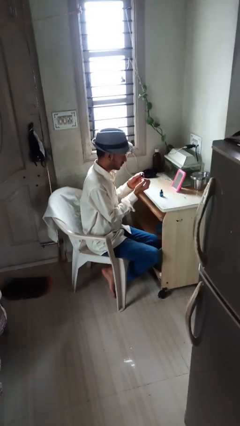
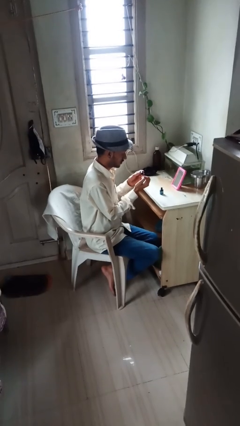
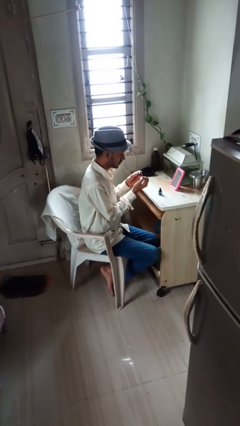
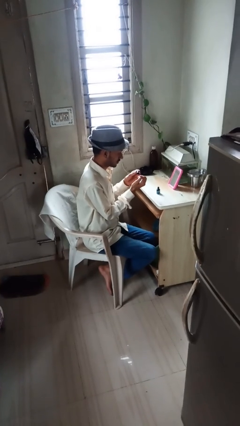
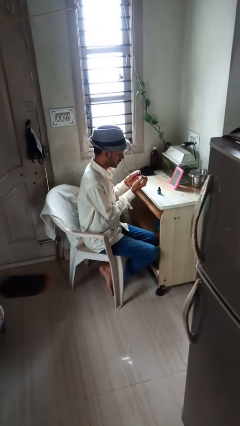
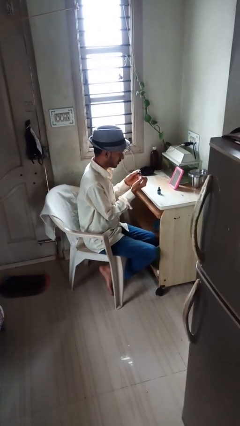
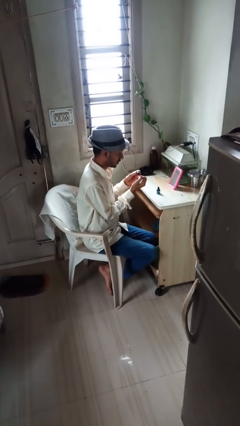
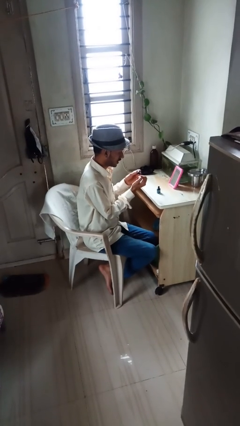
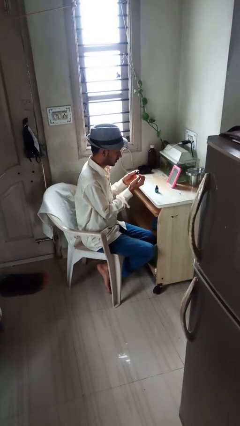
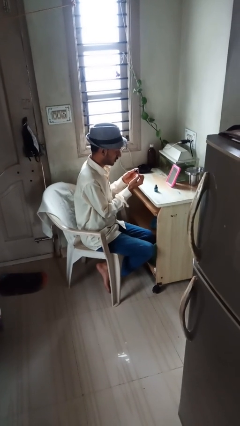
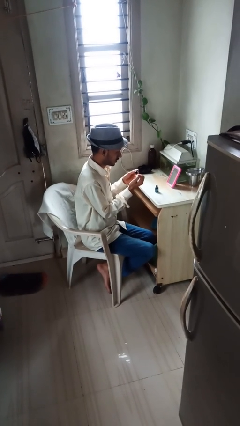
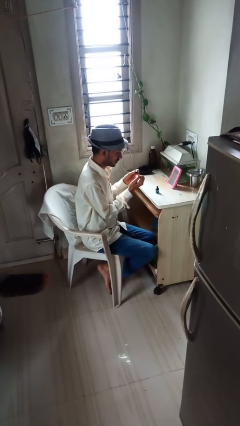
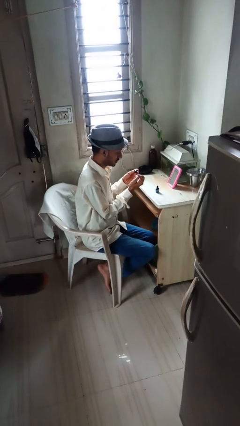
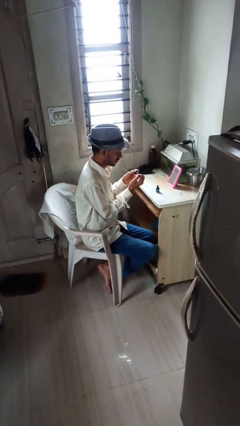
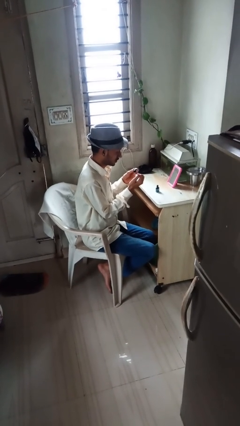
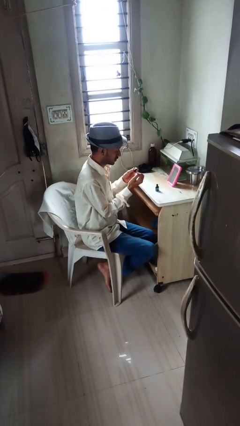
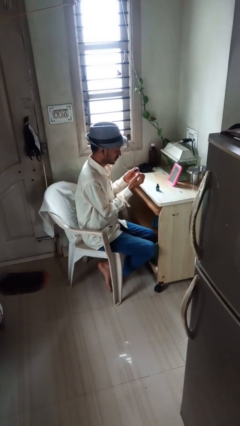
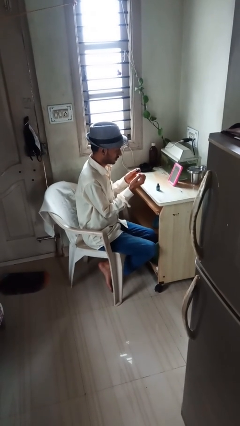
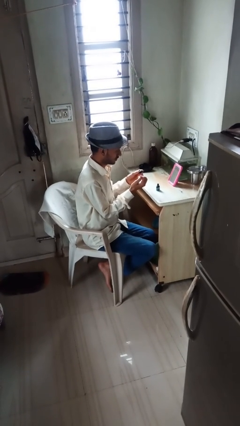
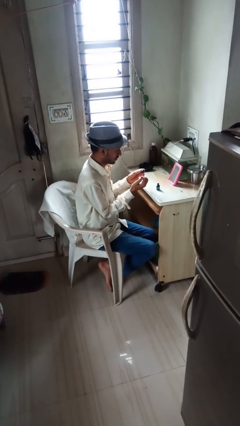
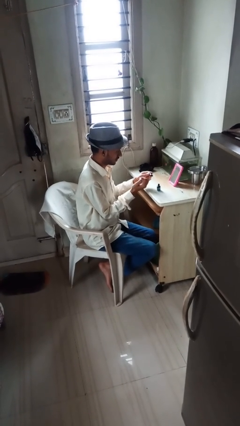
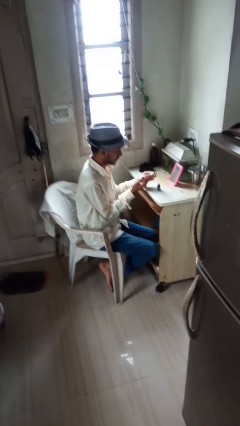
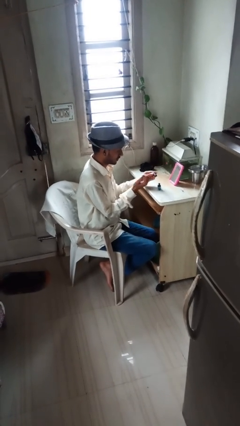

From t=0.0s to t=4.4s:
person paints fingernails

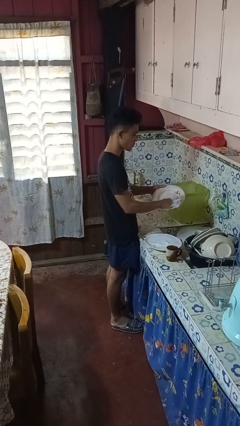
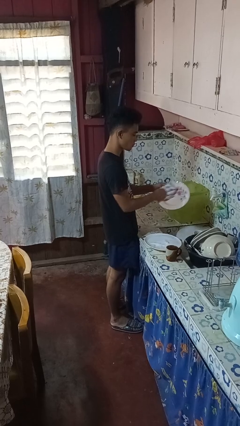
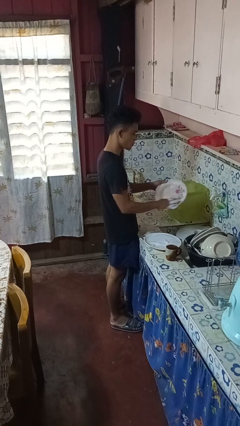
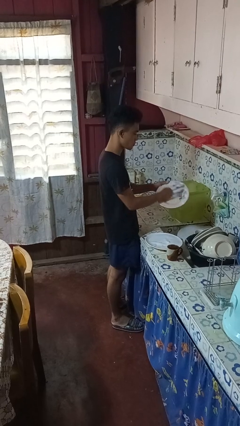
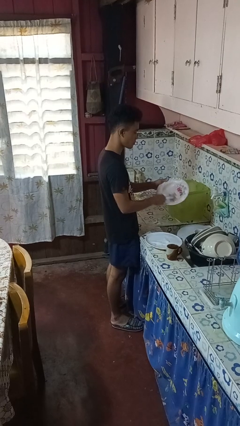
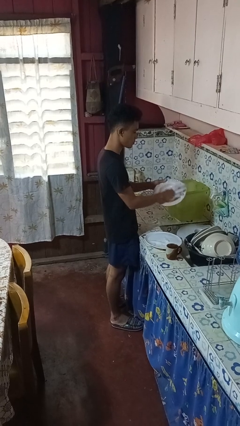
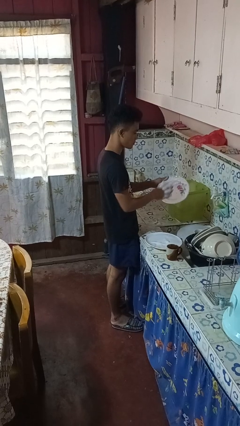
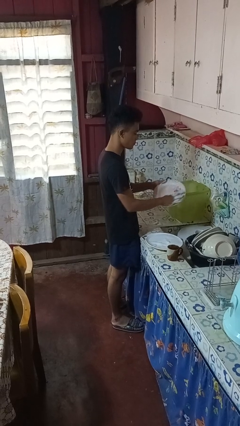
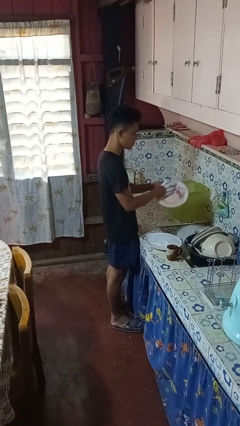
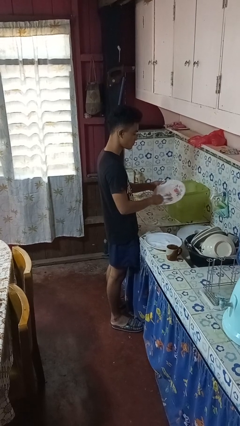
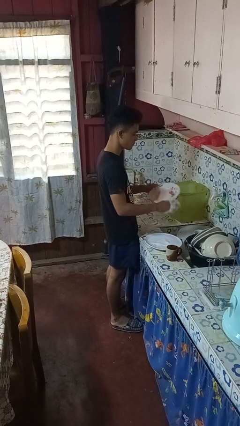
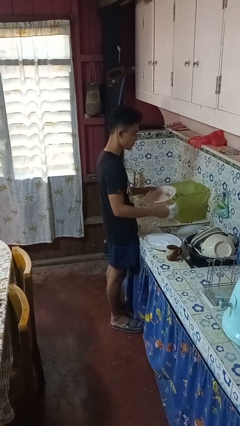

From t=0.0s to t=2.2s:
person washes dish

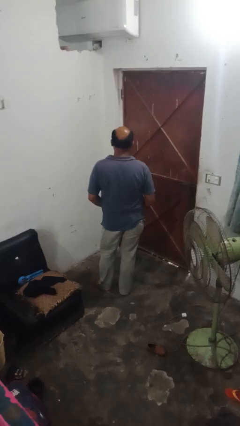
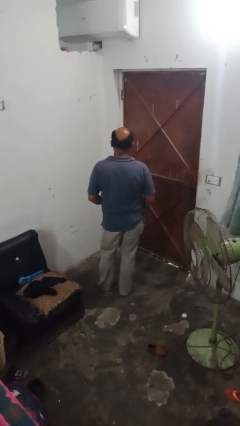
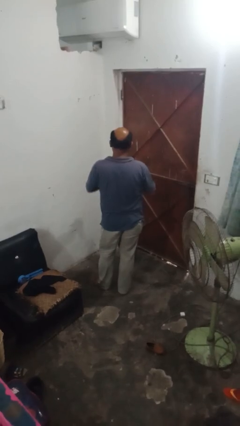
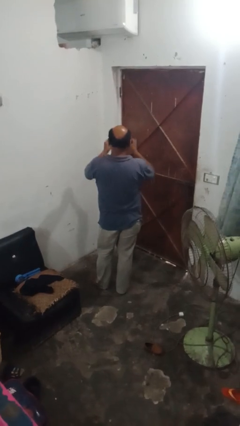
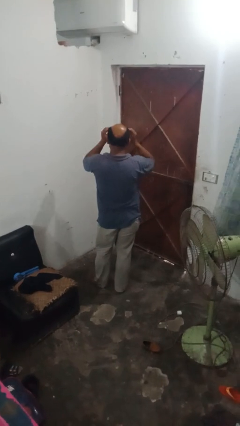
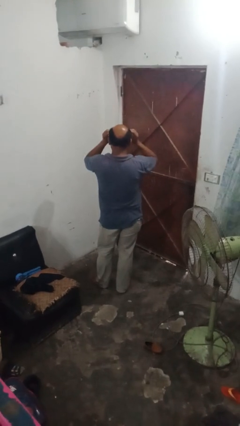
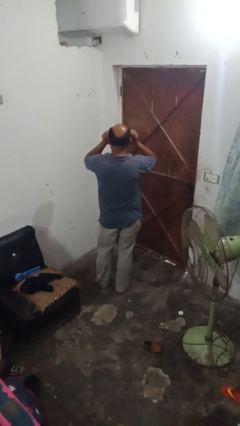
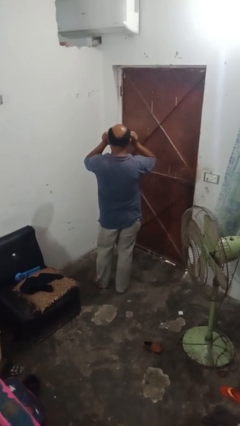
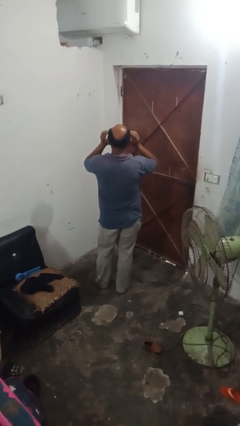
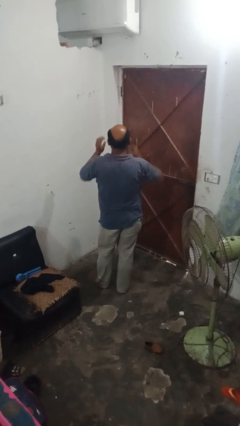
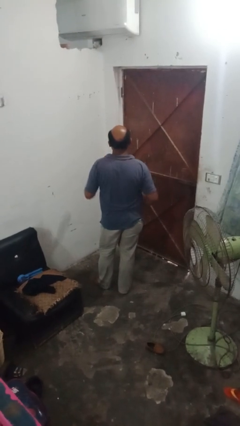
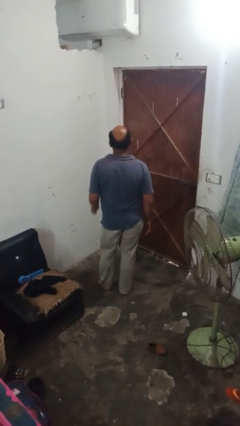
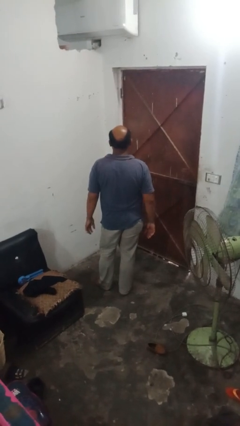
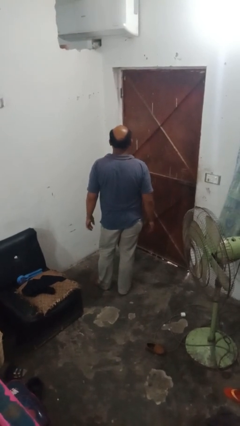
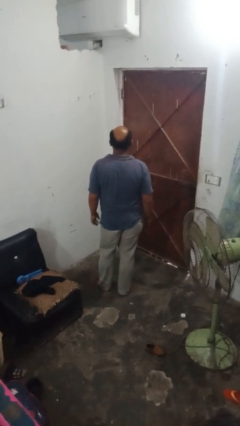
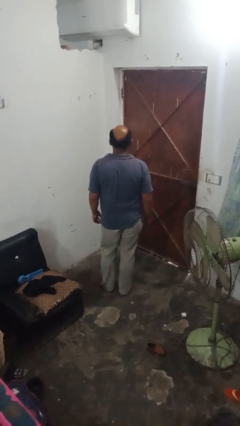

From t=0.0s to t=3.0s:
person puts on sunglasses

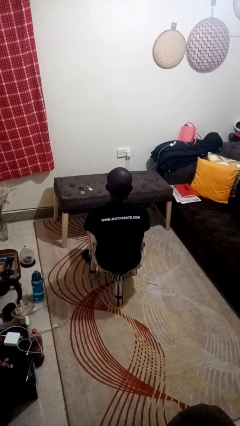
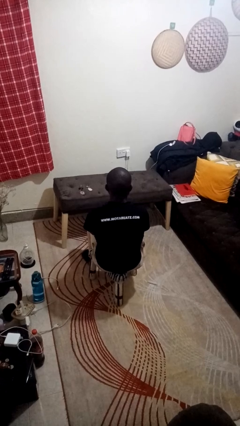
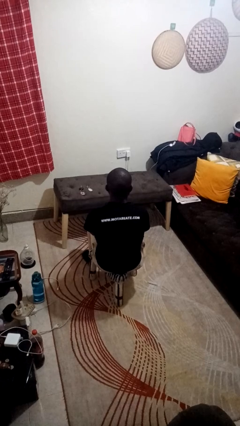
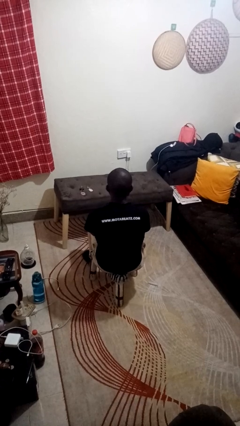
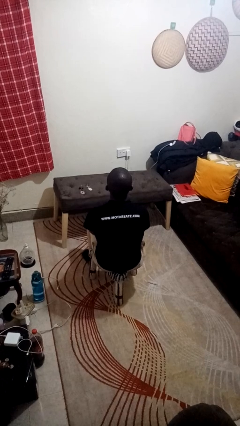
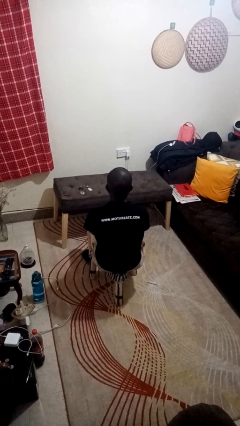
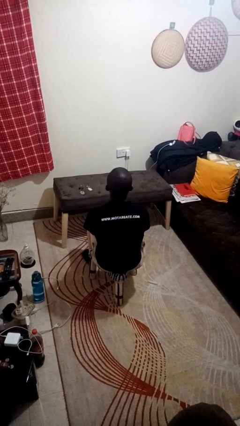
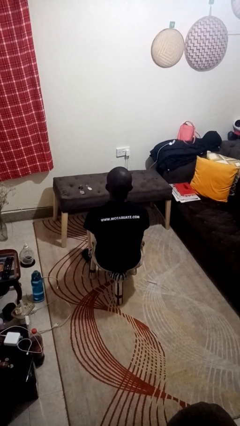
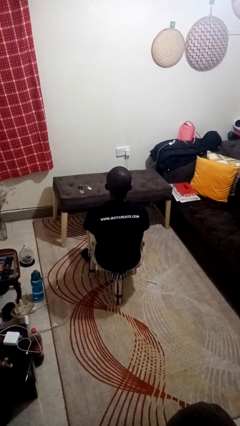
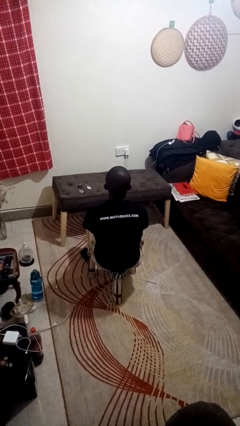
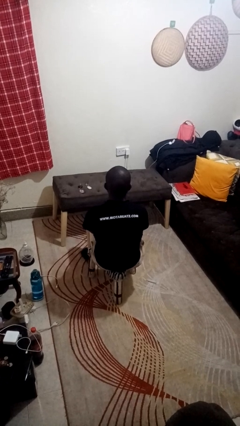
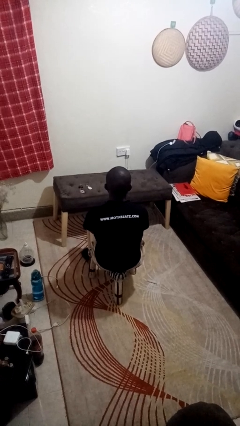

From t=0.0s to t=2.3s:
person nods head

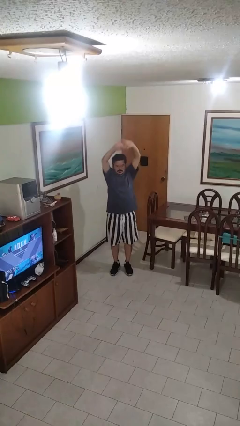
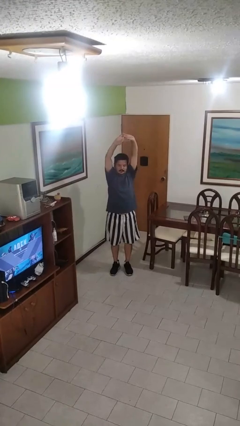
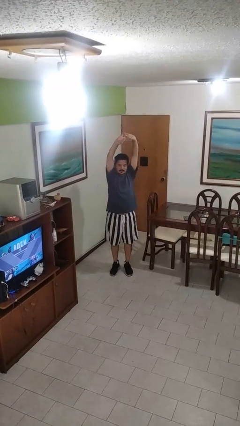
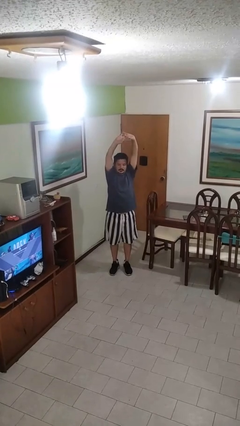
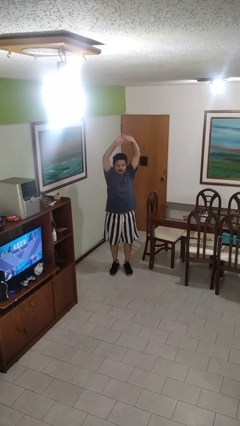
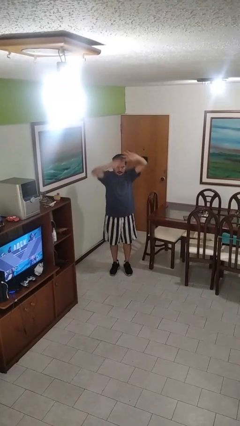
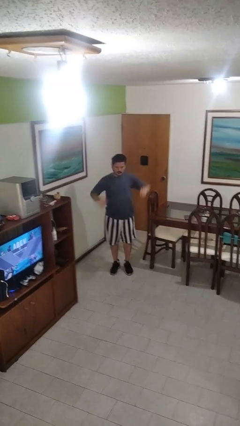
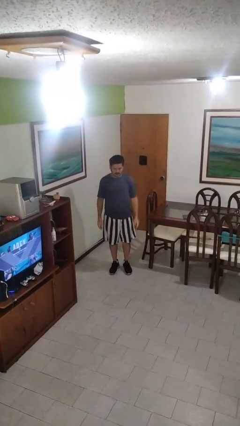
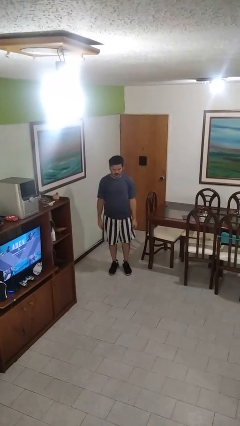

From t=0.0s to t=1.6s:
person stretches arms over head

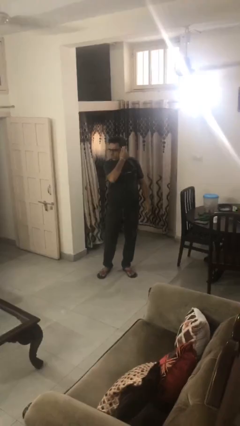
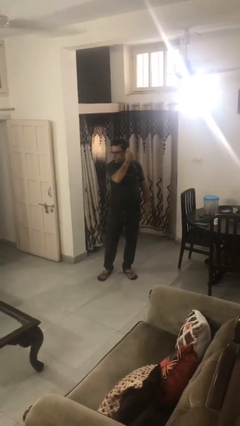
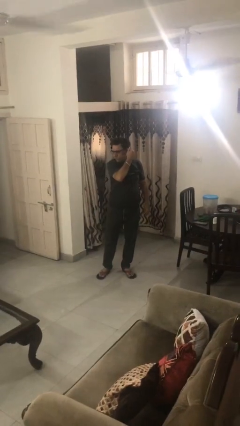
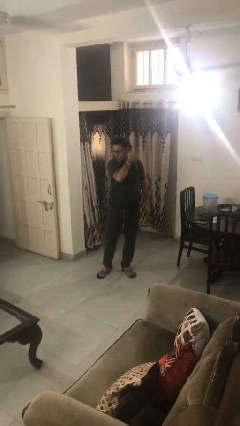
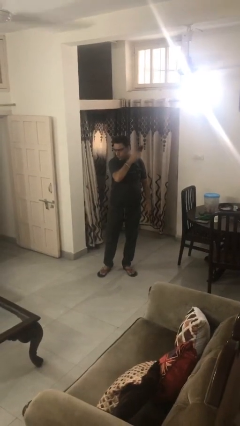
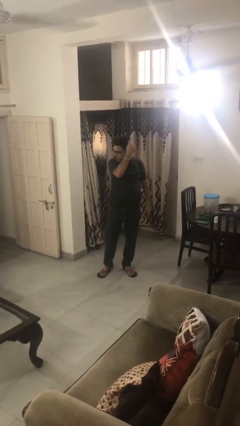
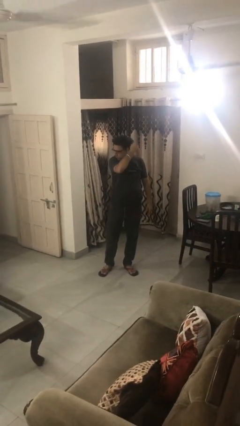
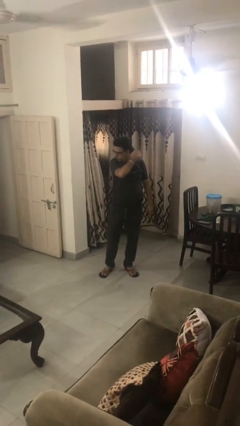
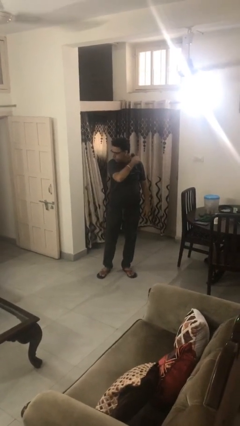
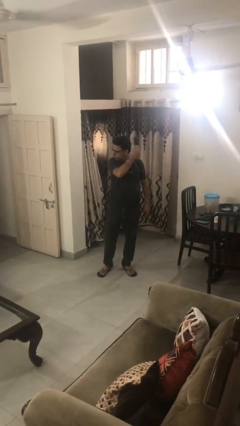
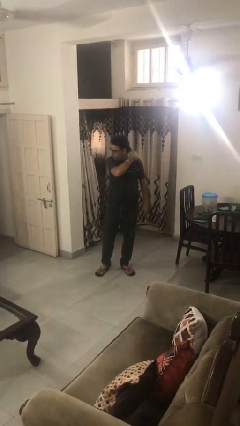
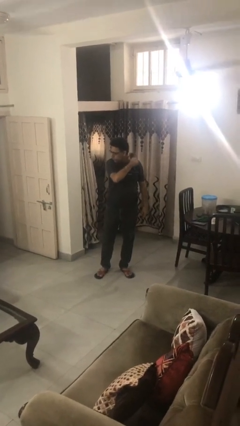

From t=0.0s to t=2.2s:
person brushes hair

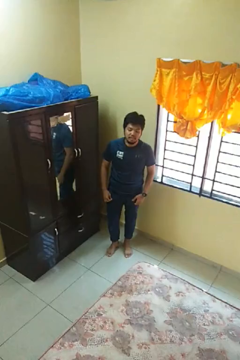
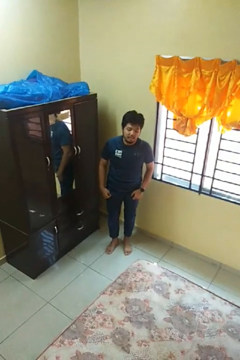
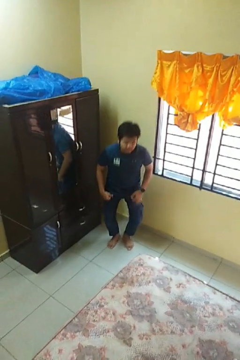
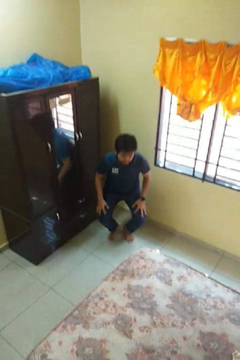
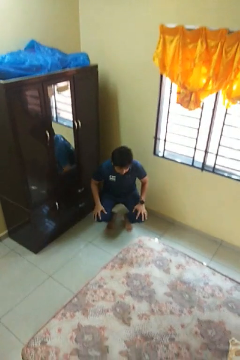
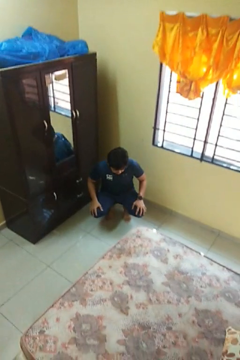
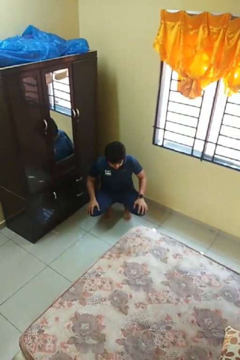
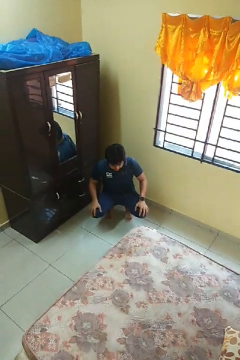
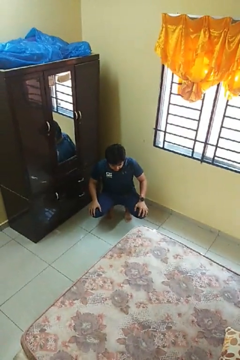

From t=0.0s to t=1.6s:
person squats
